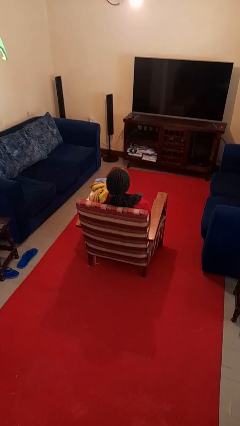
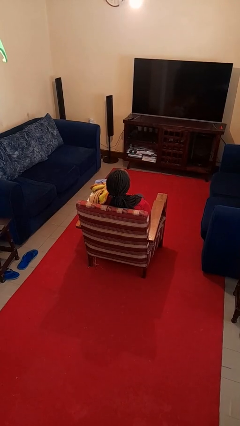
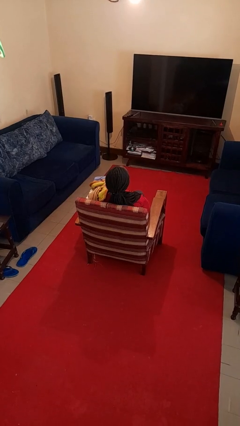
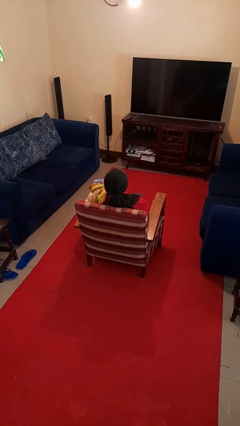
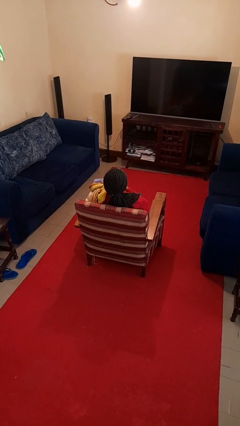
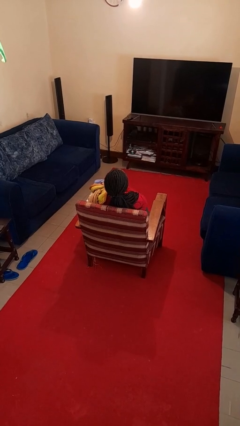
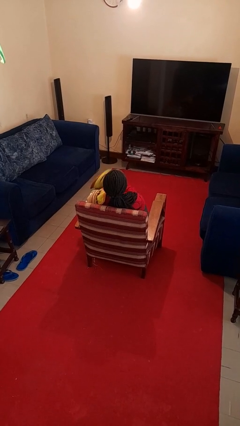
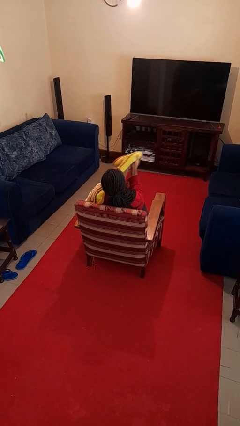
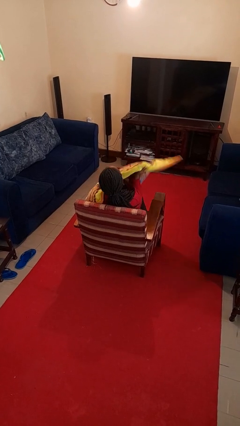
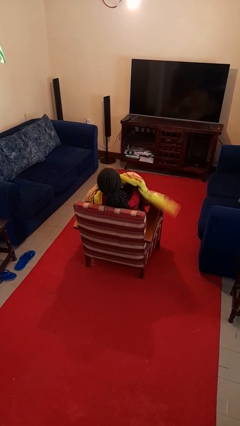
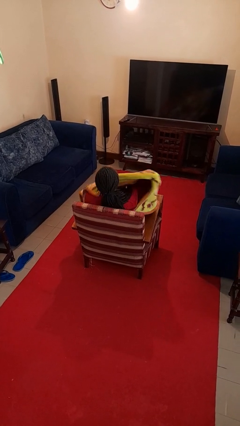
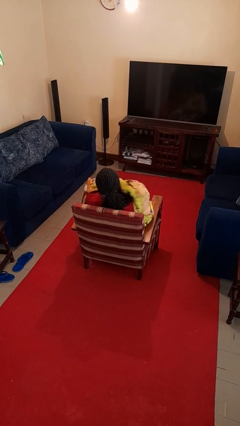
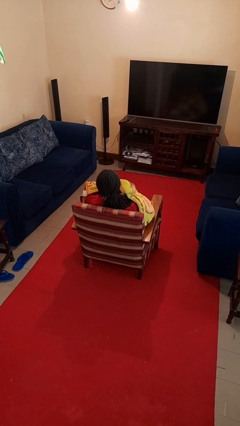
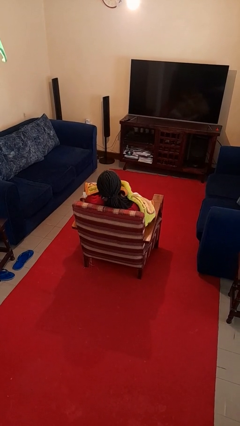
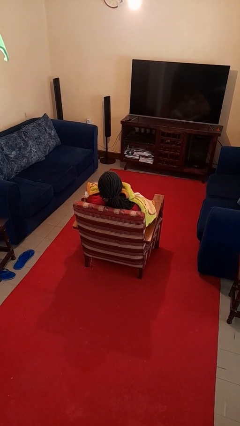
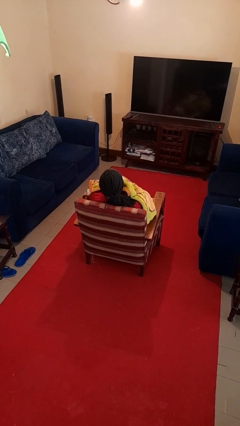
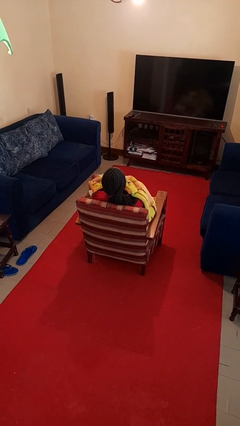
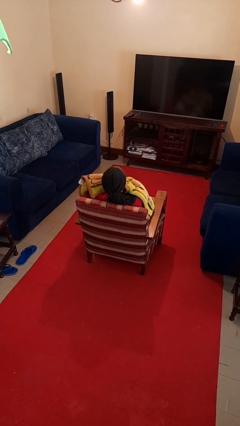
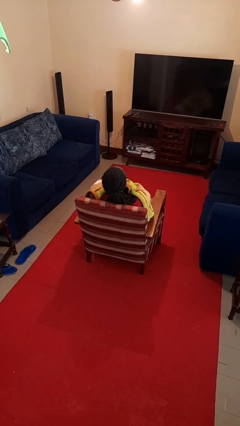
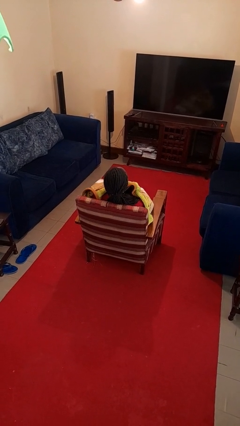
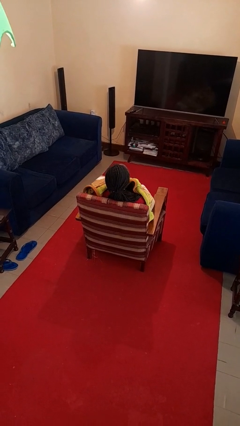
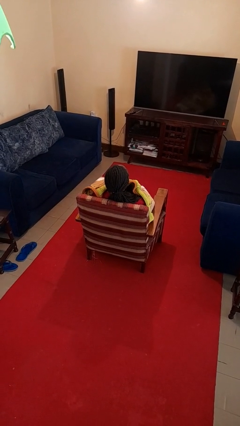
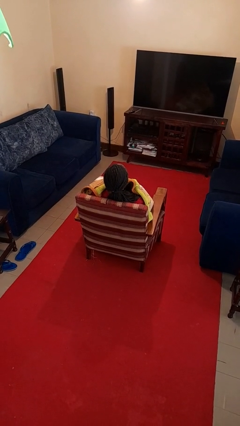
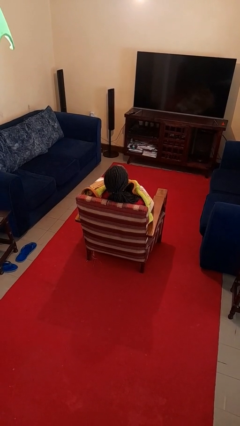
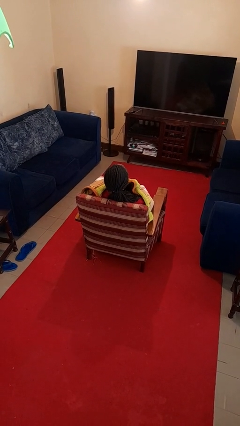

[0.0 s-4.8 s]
person covers with blanket

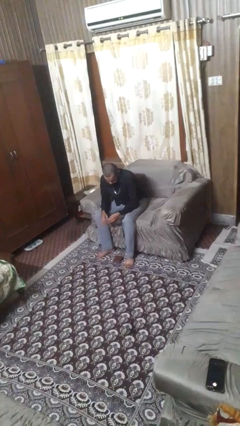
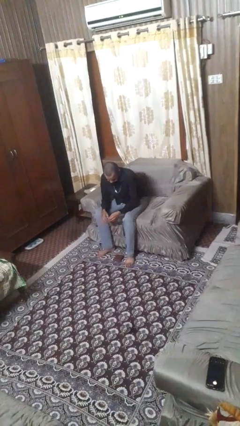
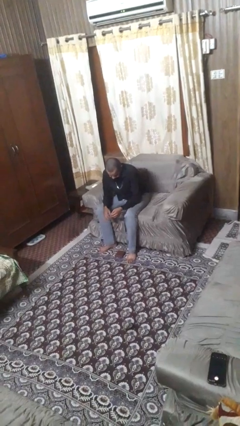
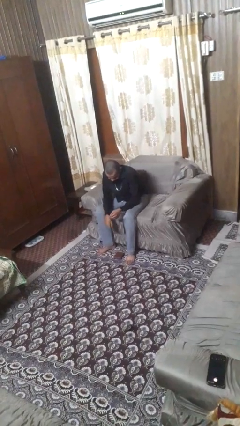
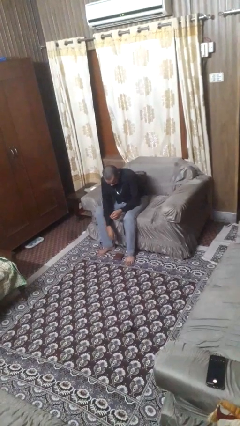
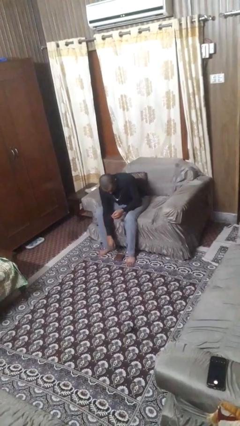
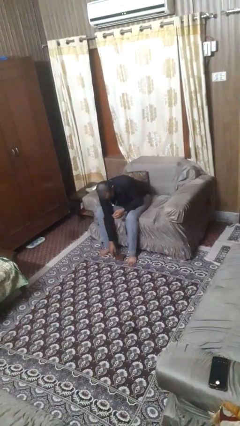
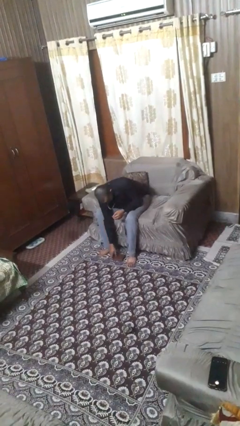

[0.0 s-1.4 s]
person drops object

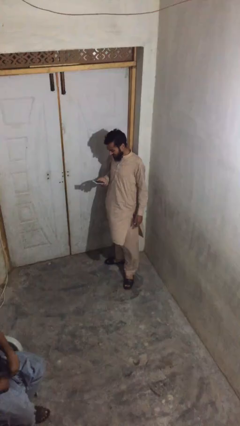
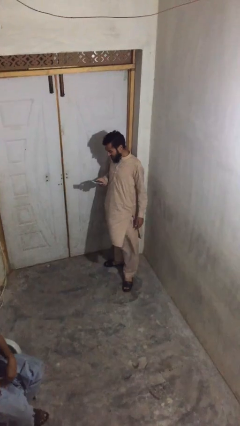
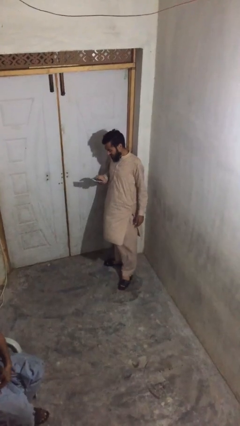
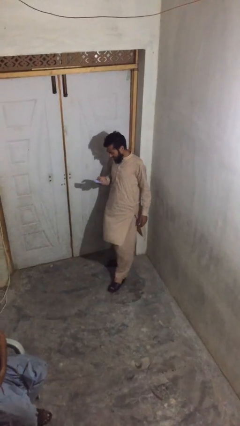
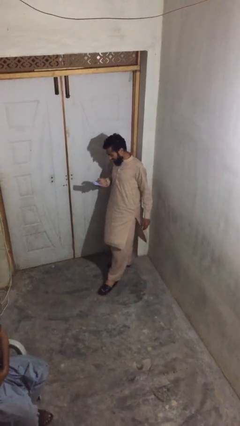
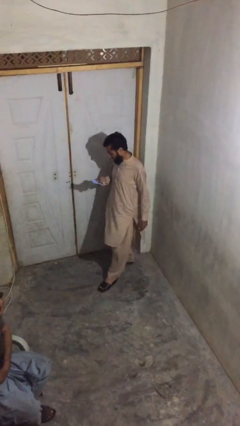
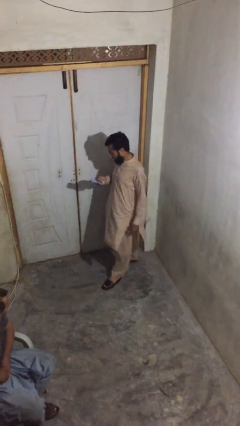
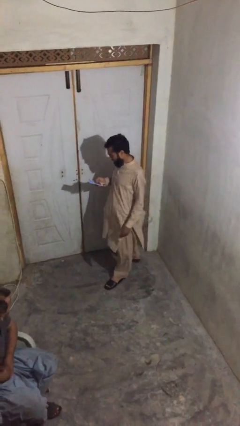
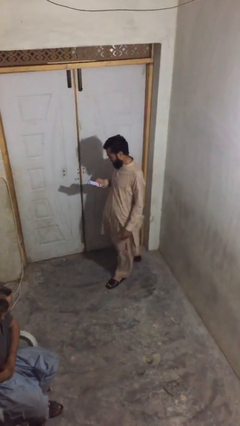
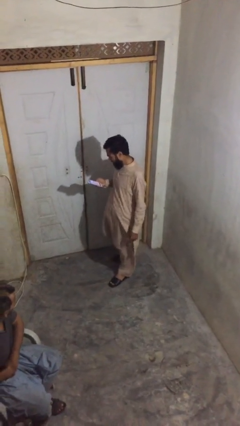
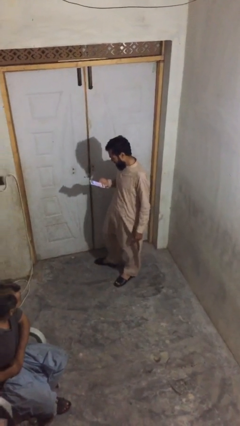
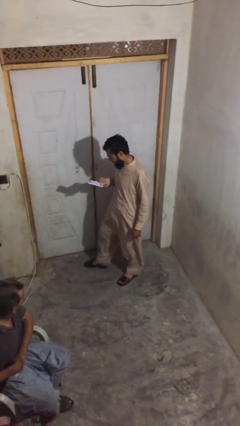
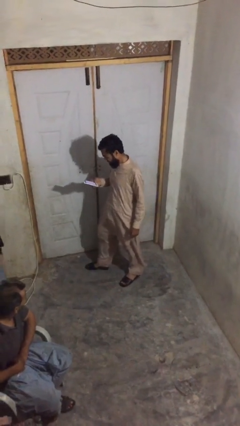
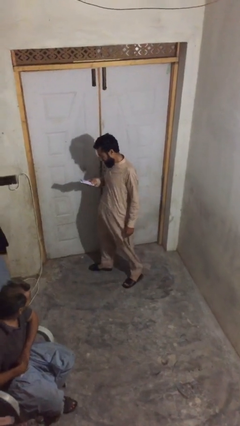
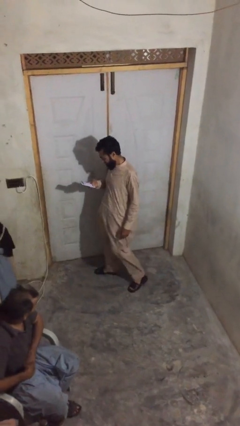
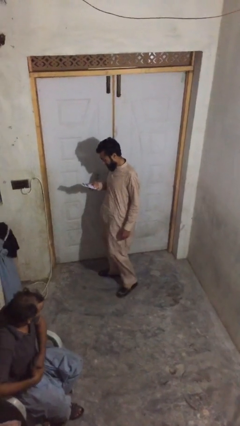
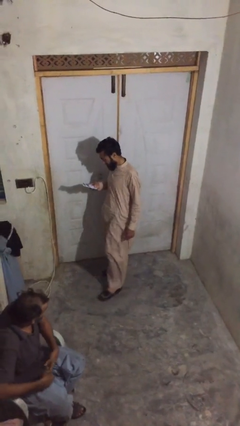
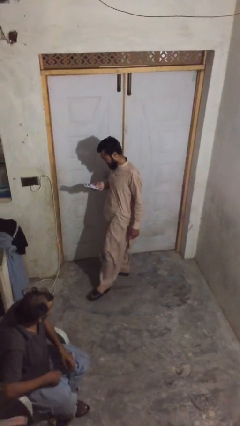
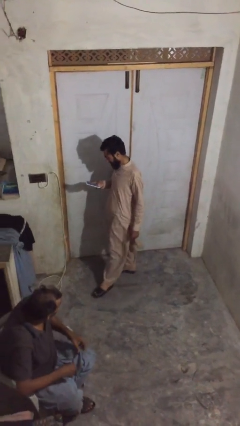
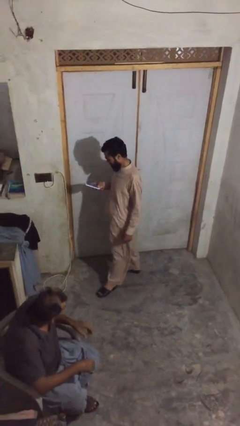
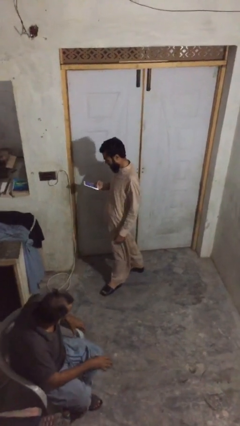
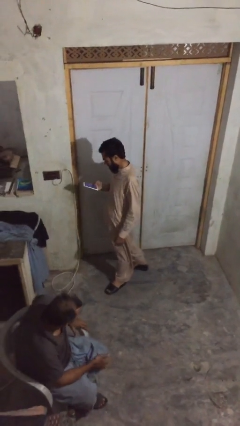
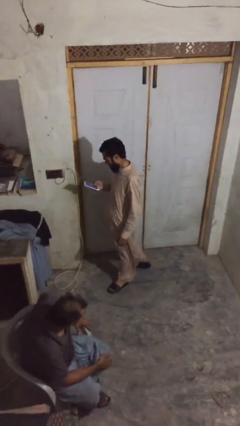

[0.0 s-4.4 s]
person texts on phone

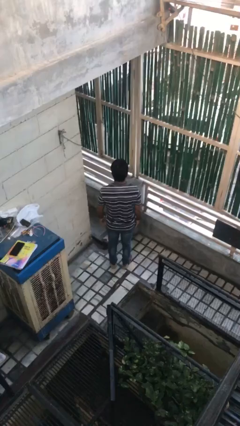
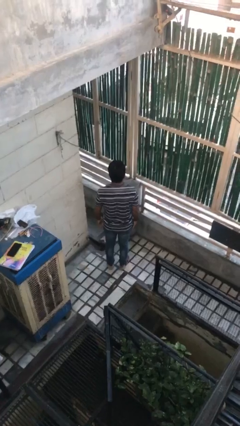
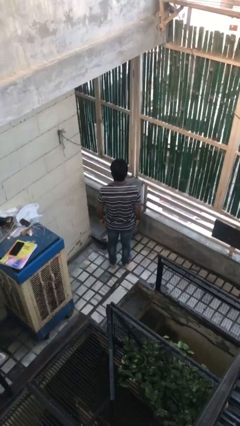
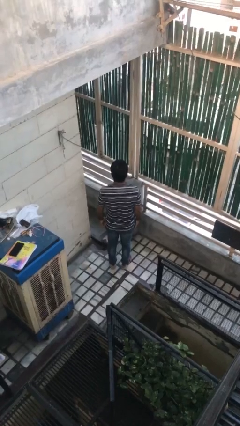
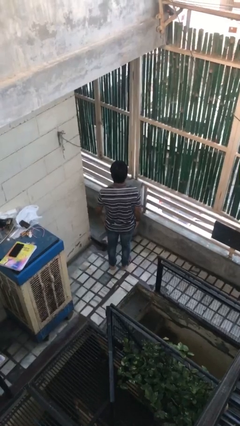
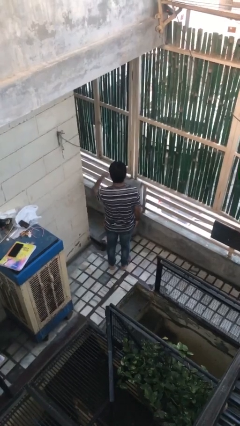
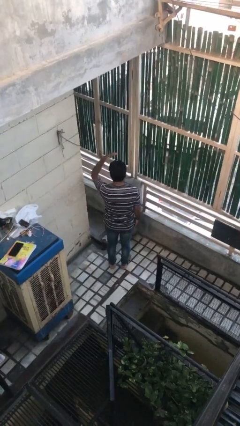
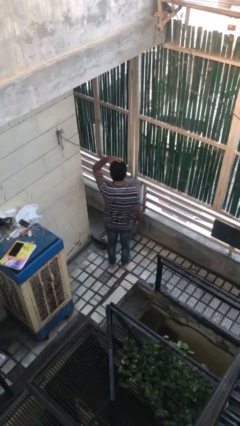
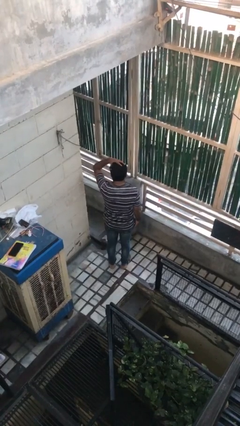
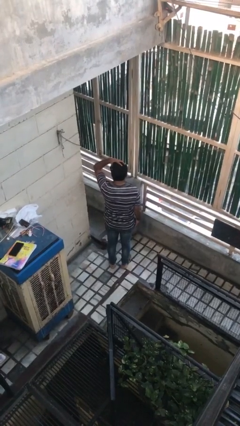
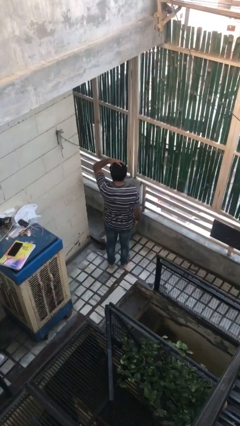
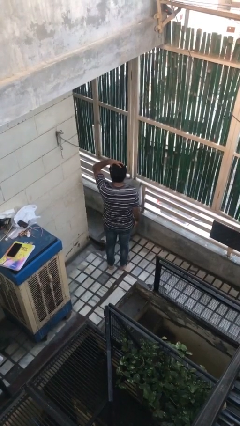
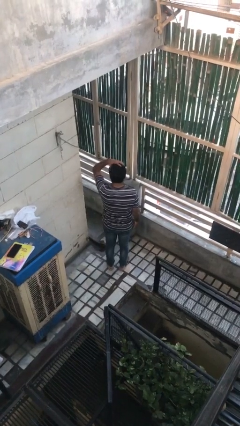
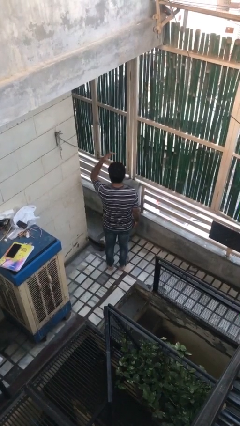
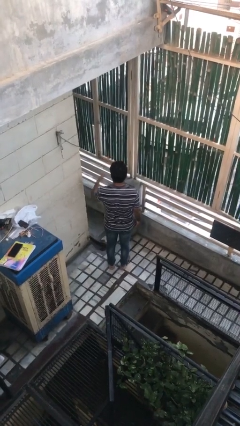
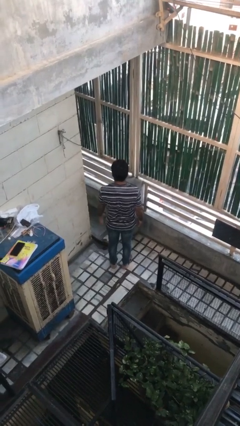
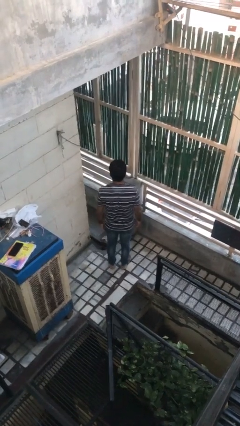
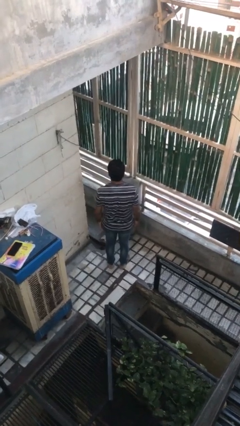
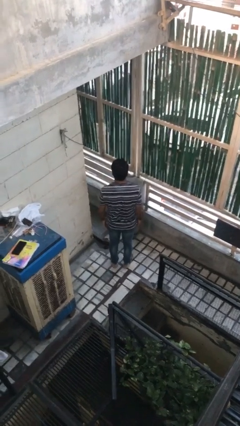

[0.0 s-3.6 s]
person pats head

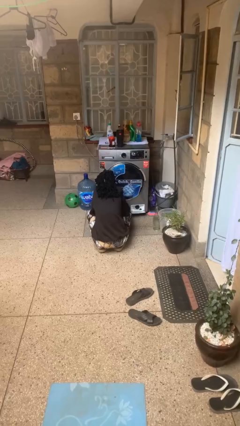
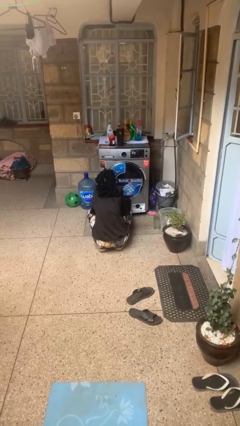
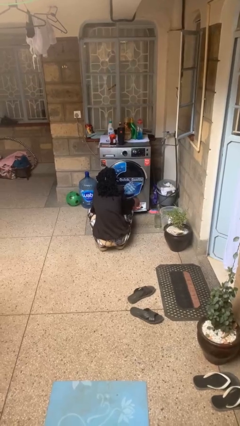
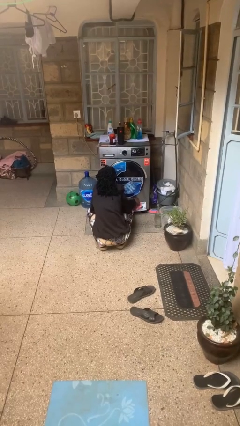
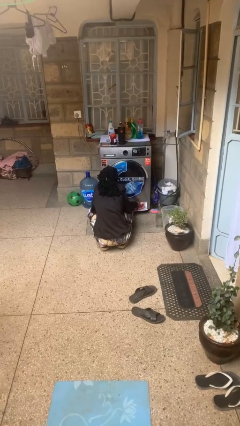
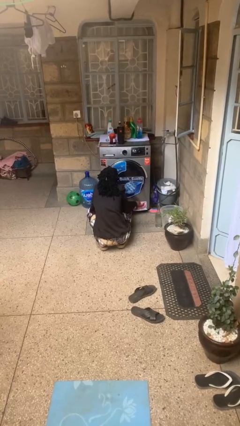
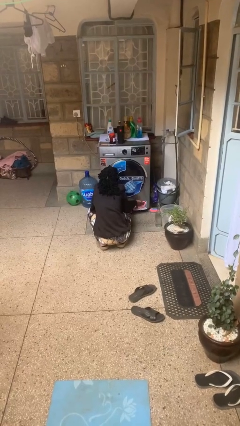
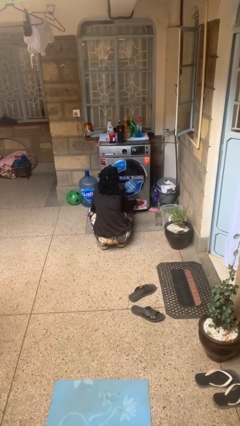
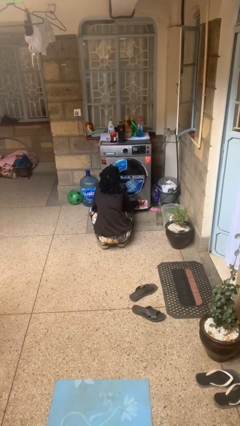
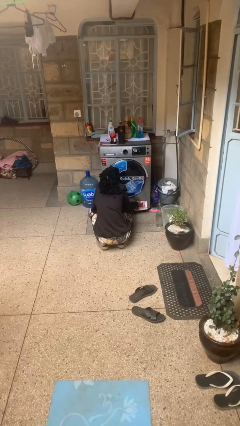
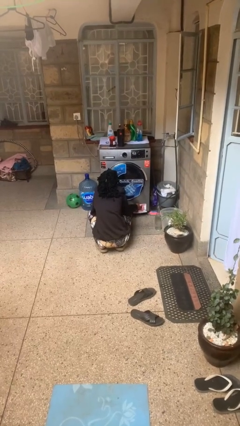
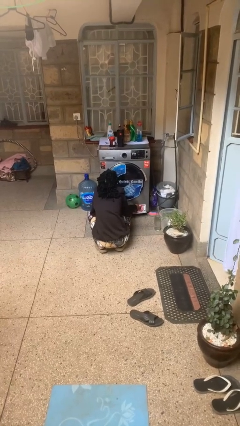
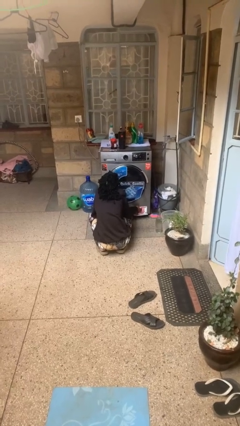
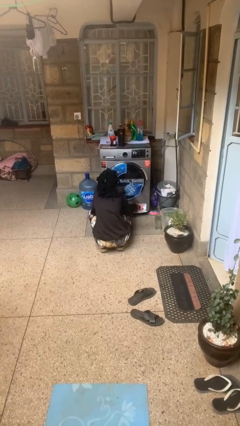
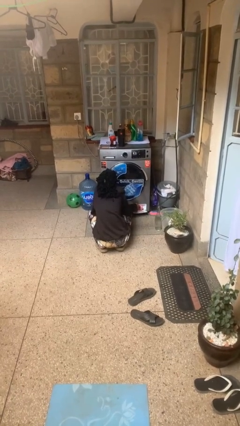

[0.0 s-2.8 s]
person cleans dryer lint trap

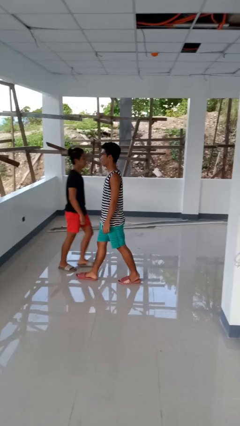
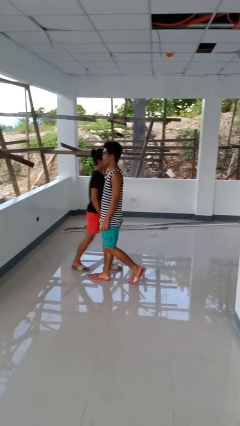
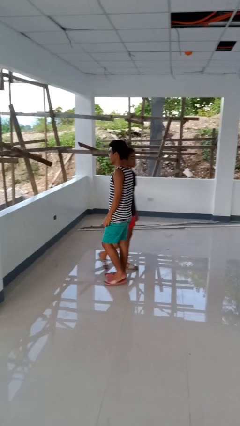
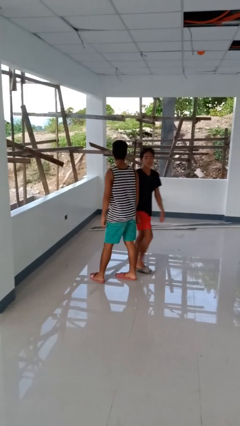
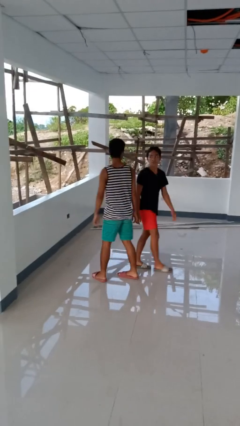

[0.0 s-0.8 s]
person bumps into person
